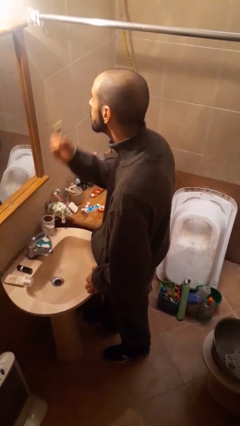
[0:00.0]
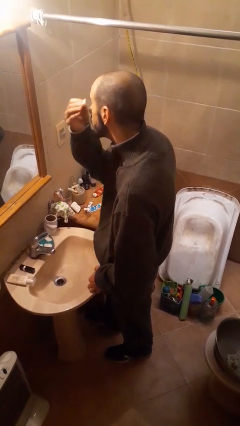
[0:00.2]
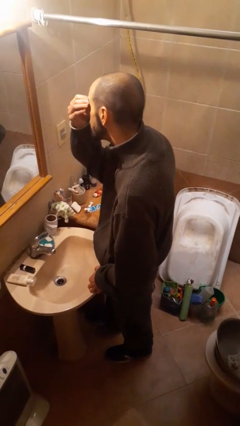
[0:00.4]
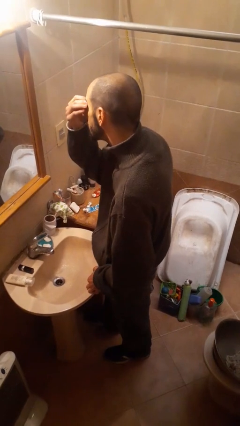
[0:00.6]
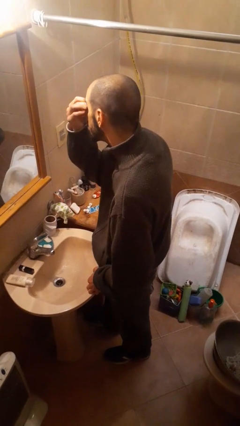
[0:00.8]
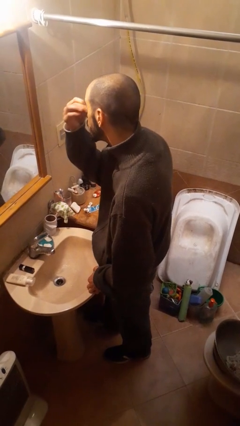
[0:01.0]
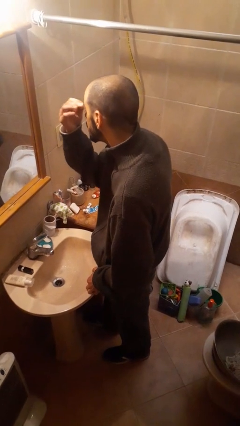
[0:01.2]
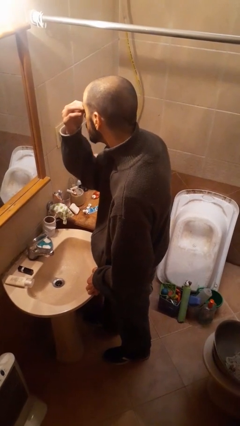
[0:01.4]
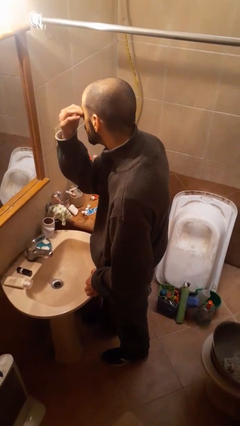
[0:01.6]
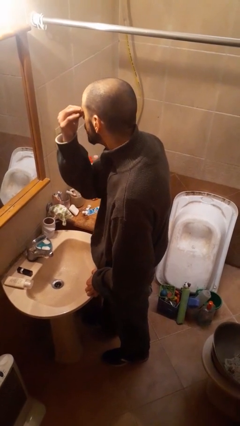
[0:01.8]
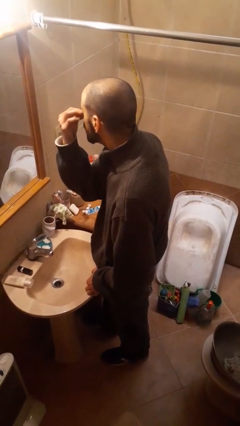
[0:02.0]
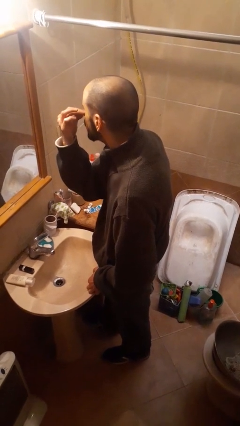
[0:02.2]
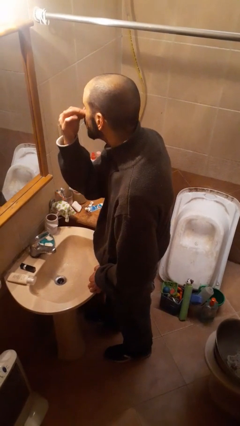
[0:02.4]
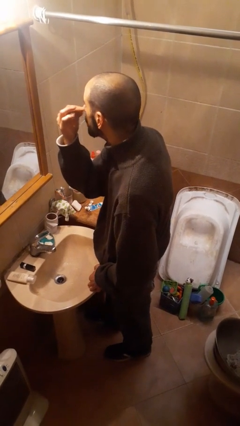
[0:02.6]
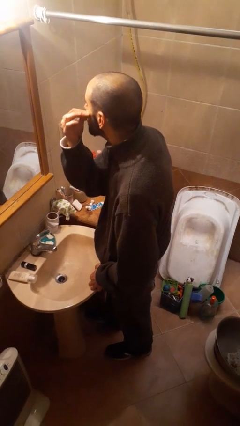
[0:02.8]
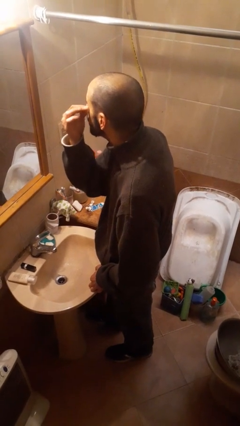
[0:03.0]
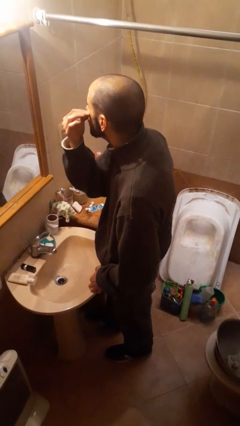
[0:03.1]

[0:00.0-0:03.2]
person applies eye makeup

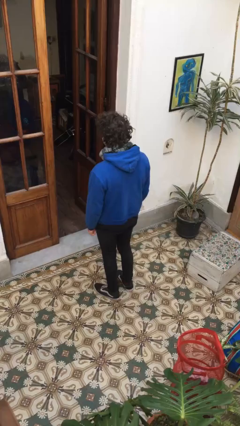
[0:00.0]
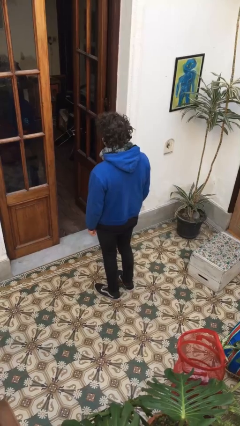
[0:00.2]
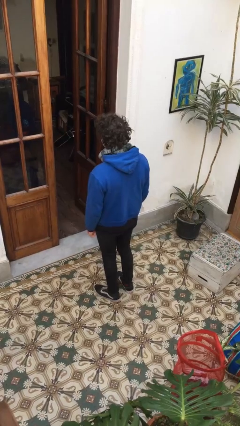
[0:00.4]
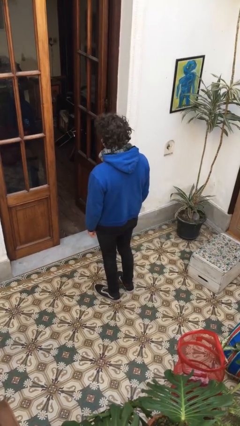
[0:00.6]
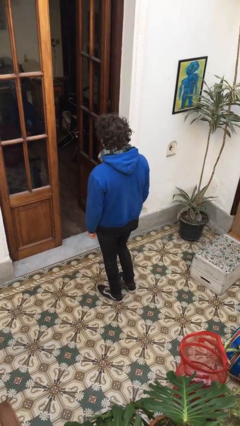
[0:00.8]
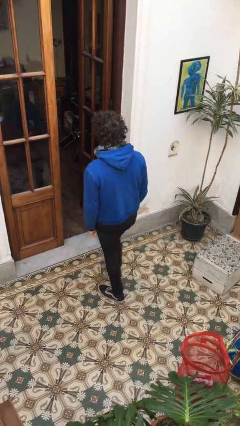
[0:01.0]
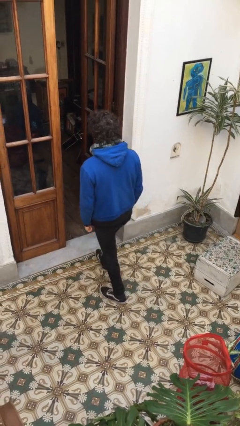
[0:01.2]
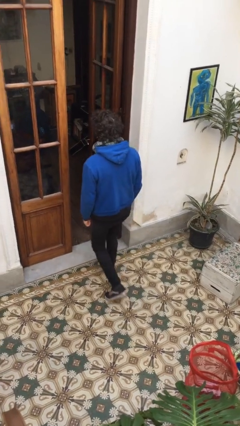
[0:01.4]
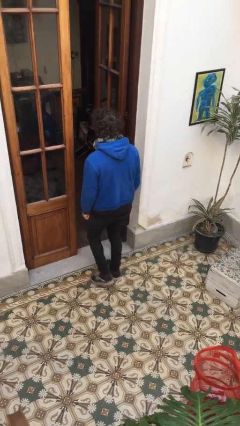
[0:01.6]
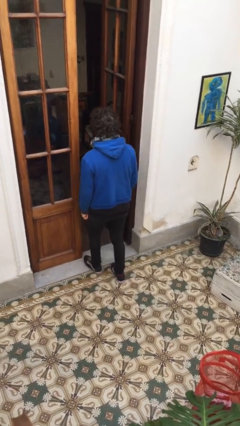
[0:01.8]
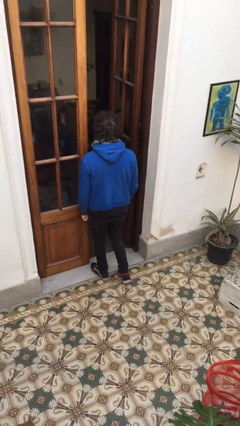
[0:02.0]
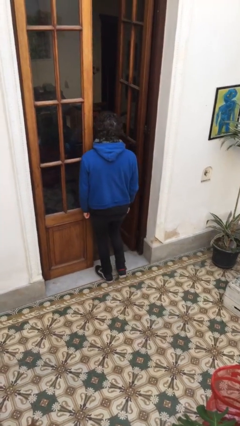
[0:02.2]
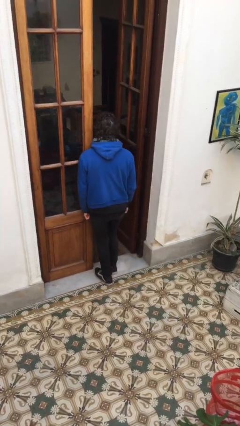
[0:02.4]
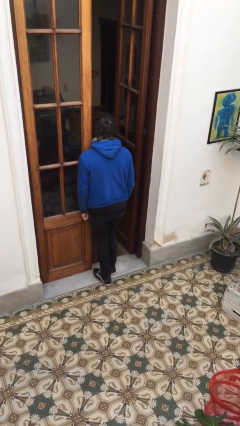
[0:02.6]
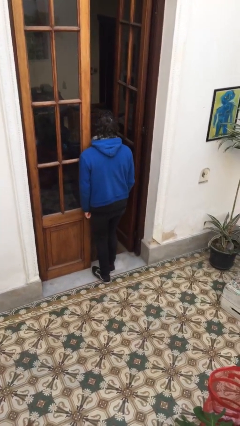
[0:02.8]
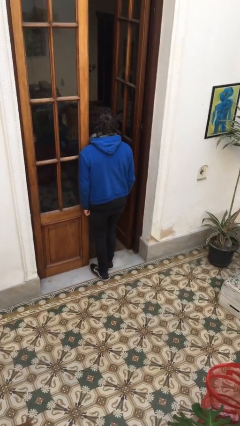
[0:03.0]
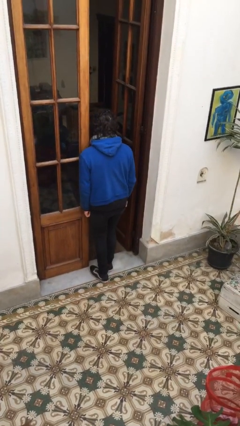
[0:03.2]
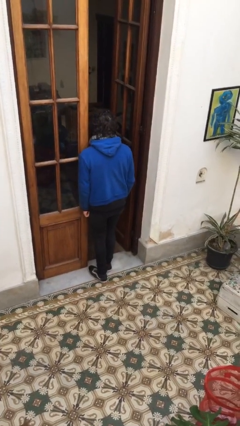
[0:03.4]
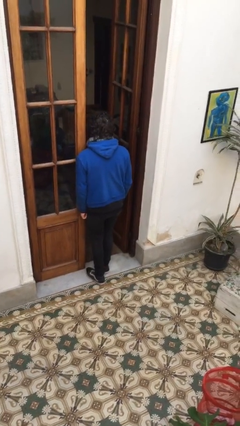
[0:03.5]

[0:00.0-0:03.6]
person bumps into wall

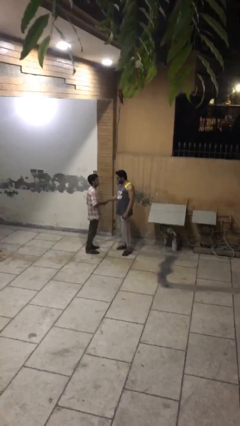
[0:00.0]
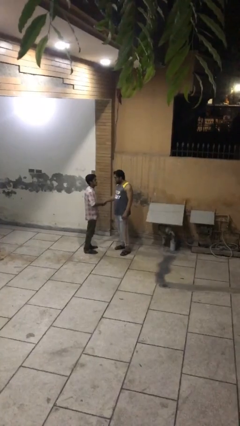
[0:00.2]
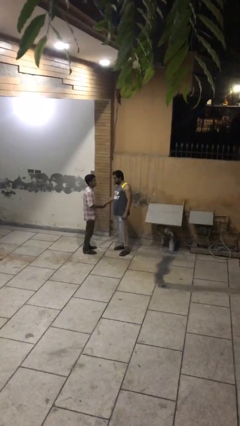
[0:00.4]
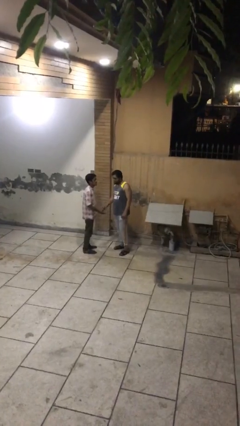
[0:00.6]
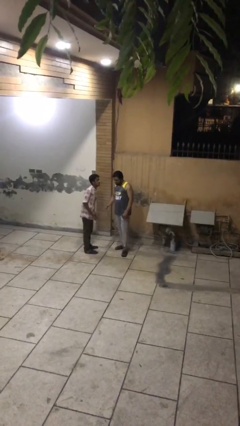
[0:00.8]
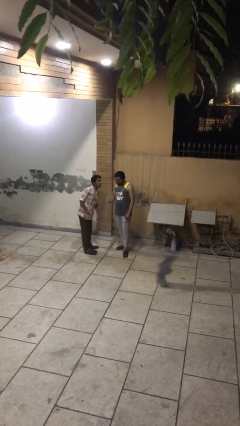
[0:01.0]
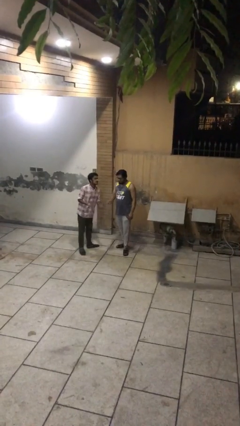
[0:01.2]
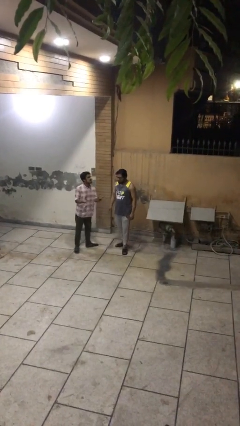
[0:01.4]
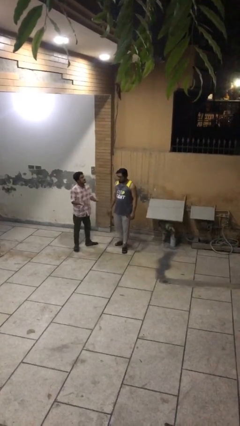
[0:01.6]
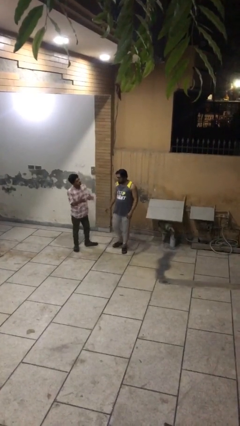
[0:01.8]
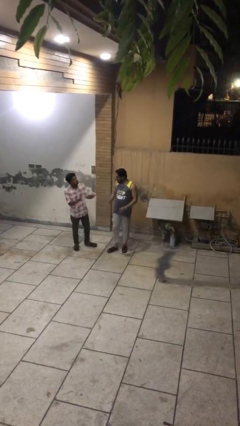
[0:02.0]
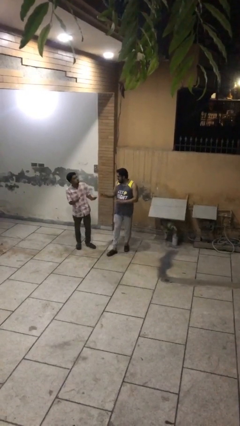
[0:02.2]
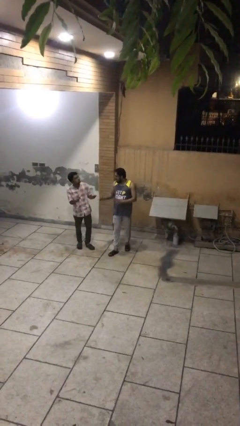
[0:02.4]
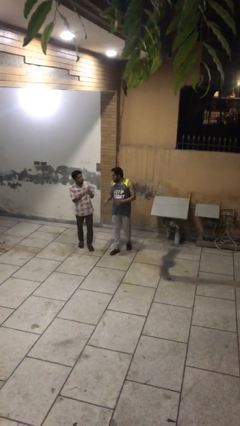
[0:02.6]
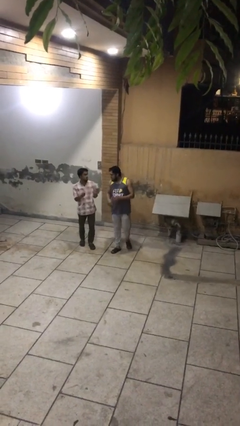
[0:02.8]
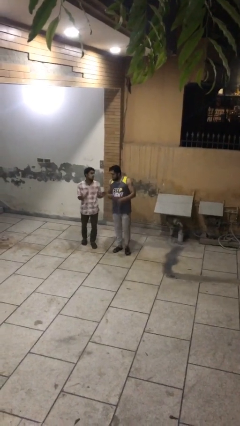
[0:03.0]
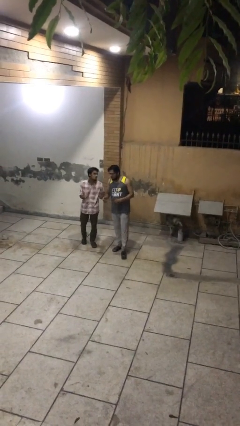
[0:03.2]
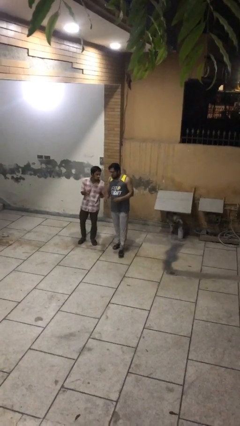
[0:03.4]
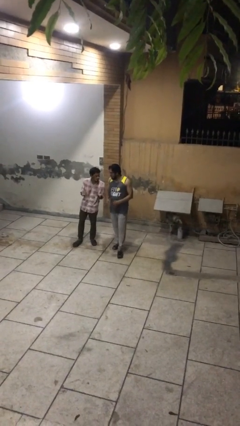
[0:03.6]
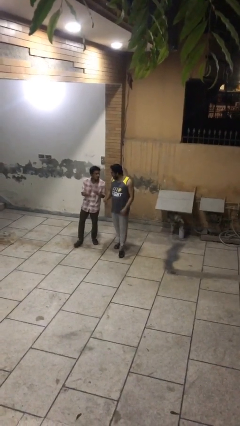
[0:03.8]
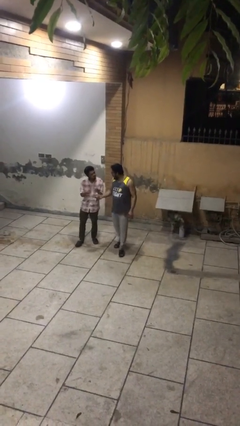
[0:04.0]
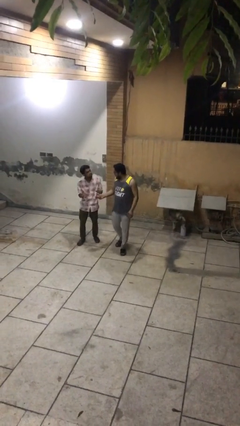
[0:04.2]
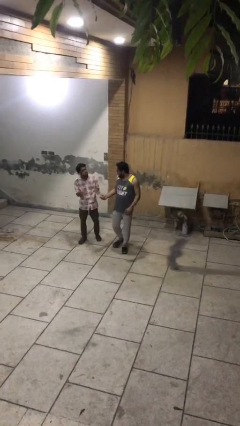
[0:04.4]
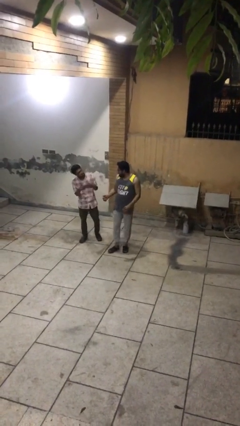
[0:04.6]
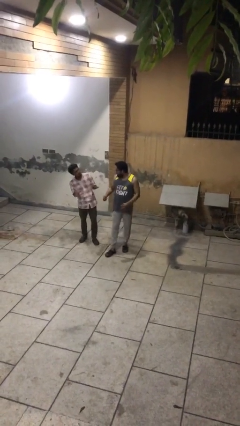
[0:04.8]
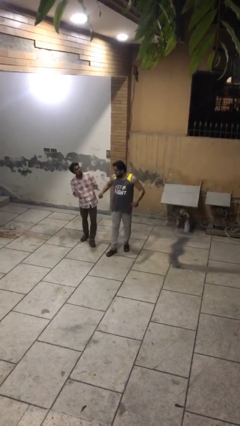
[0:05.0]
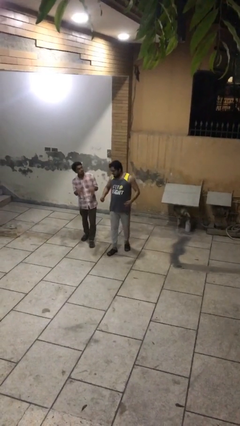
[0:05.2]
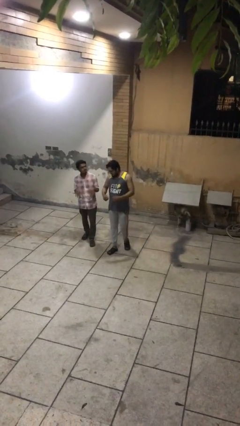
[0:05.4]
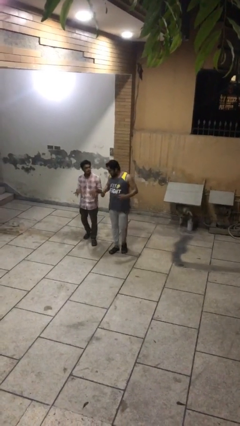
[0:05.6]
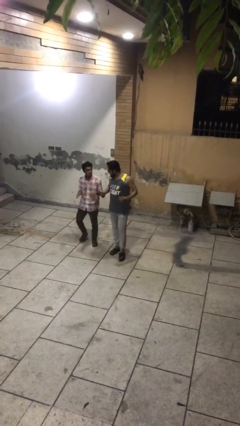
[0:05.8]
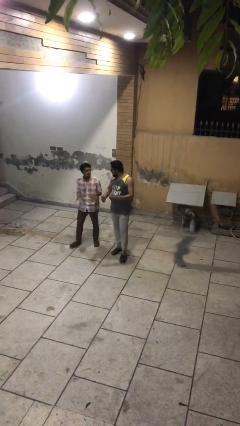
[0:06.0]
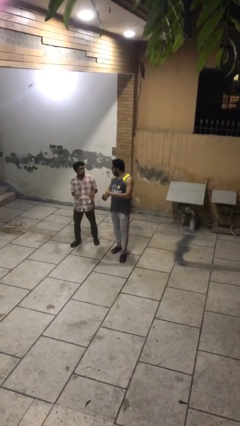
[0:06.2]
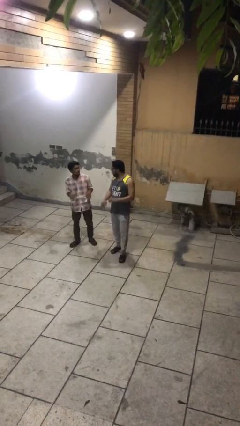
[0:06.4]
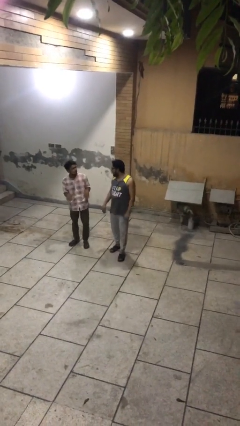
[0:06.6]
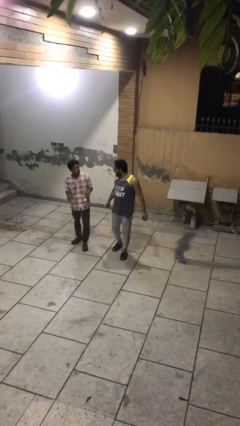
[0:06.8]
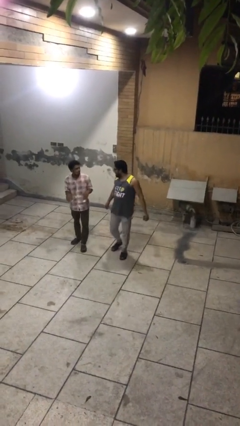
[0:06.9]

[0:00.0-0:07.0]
person talks to person

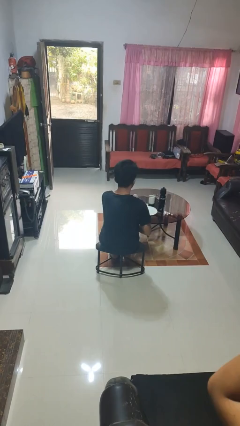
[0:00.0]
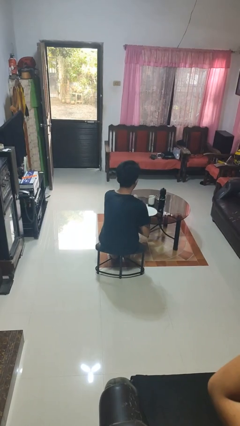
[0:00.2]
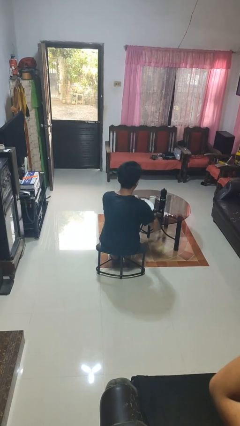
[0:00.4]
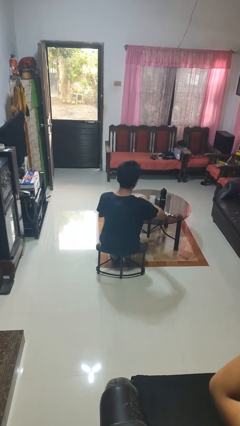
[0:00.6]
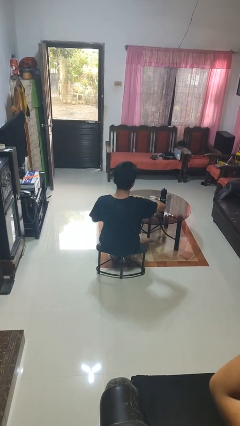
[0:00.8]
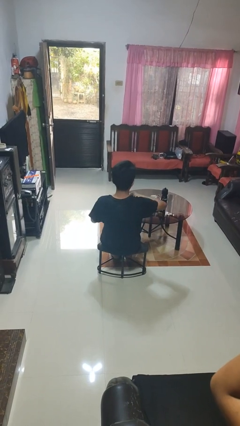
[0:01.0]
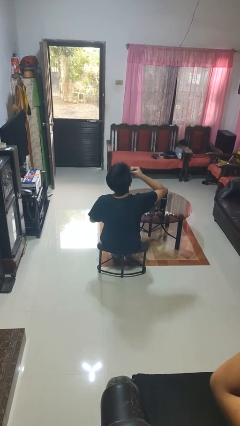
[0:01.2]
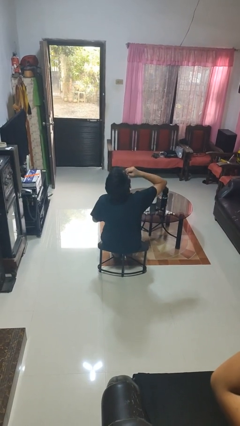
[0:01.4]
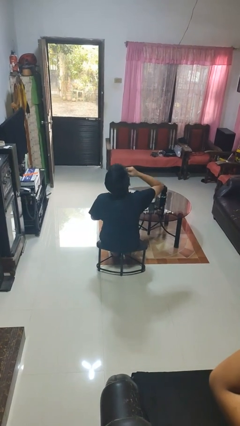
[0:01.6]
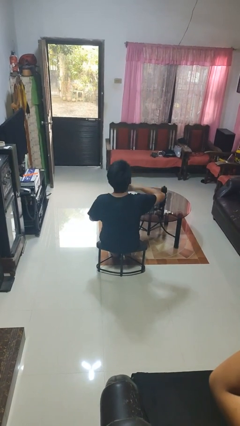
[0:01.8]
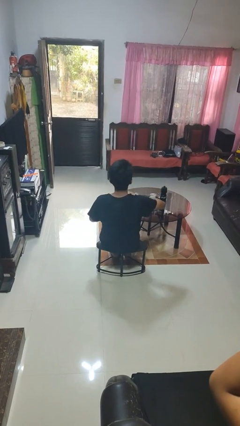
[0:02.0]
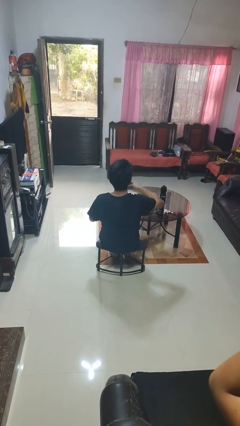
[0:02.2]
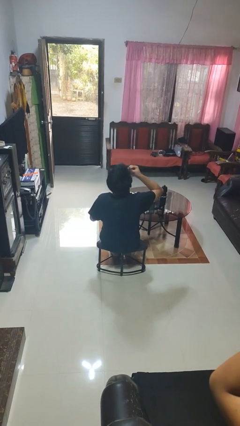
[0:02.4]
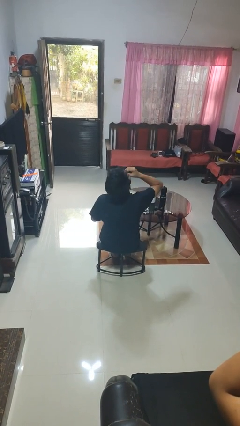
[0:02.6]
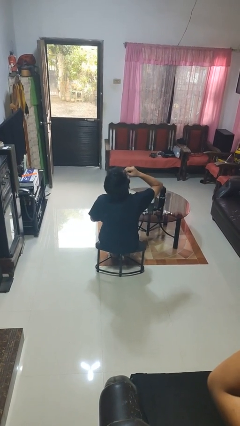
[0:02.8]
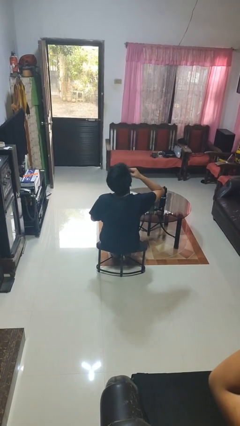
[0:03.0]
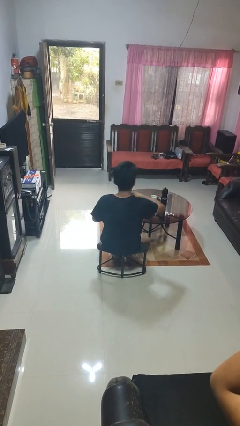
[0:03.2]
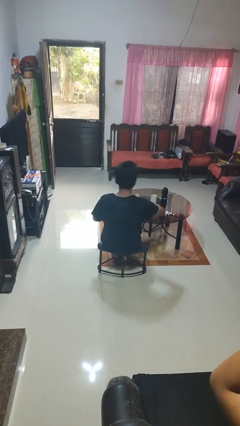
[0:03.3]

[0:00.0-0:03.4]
person eats with hands

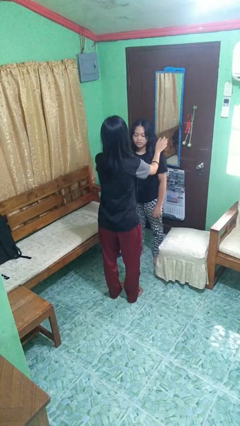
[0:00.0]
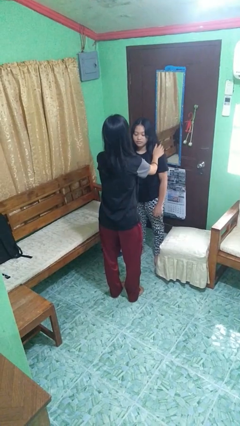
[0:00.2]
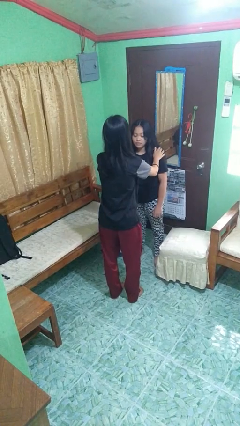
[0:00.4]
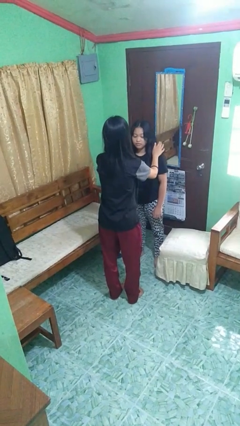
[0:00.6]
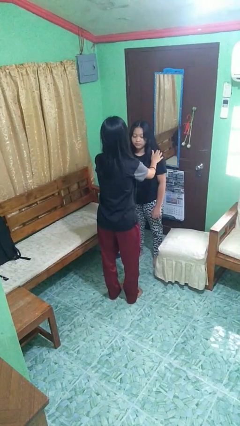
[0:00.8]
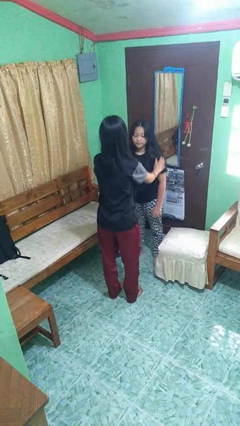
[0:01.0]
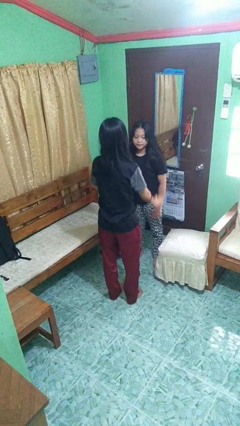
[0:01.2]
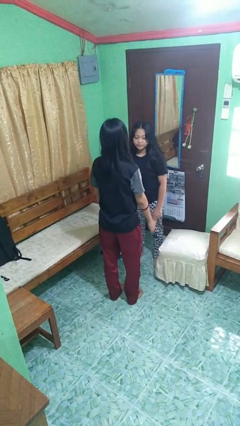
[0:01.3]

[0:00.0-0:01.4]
person pounds shoulders of person
